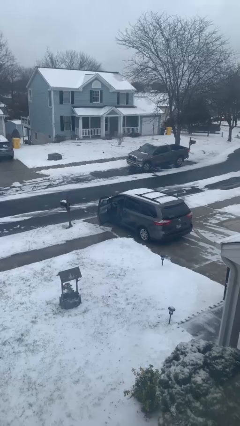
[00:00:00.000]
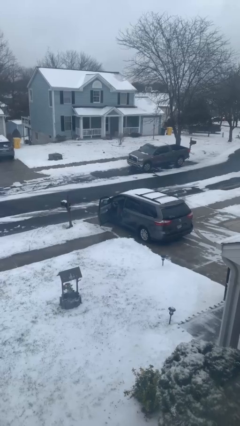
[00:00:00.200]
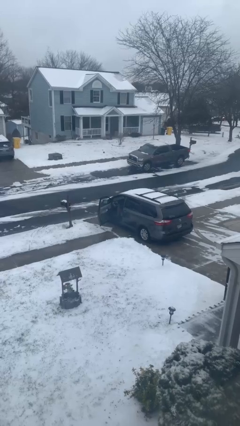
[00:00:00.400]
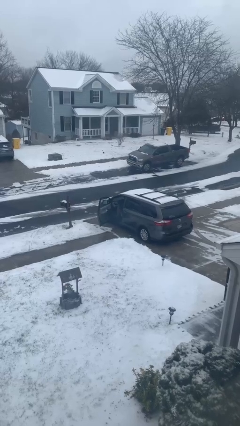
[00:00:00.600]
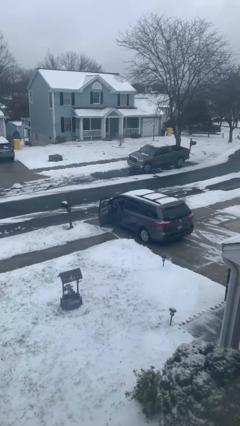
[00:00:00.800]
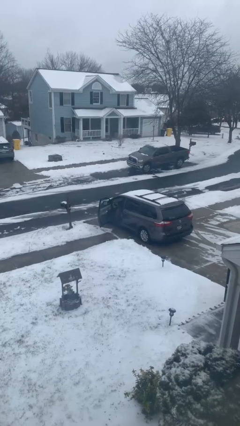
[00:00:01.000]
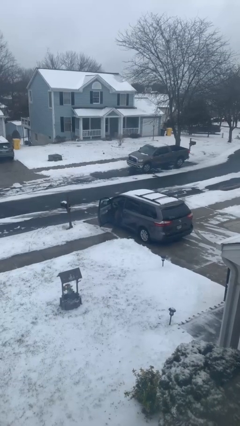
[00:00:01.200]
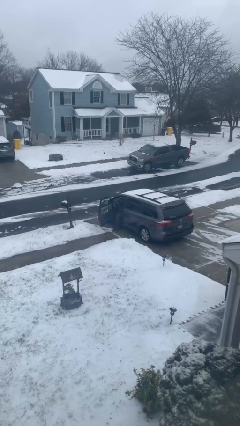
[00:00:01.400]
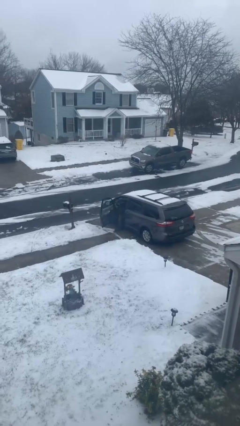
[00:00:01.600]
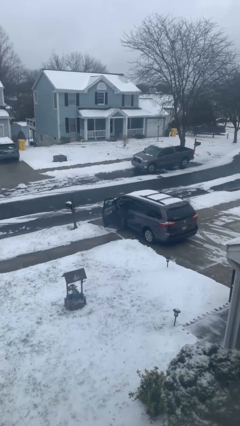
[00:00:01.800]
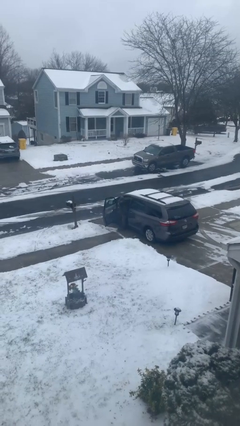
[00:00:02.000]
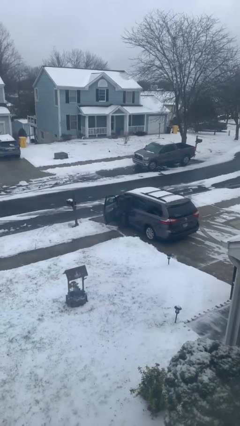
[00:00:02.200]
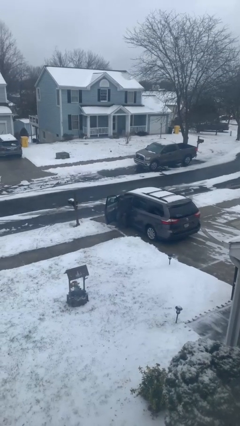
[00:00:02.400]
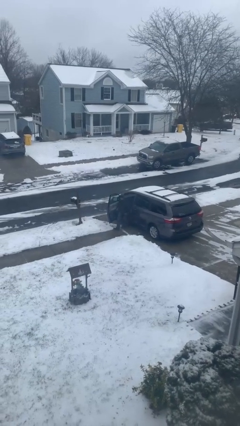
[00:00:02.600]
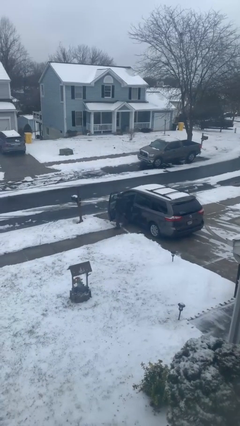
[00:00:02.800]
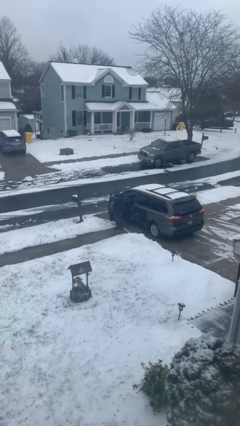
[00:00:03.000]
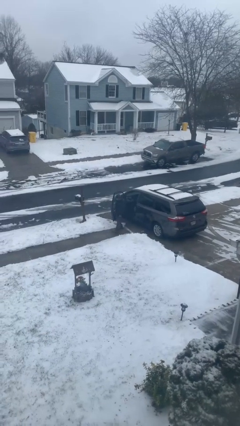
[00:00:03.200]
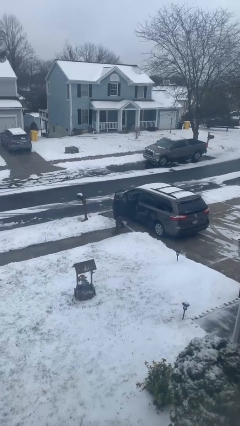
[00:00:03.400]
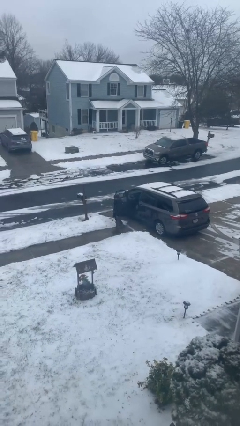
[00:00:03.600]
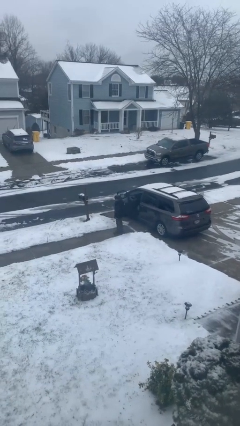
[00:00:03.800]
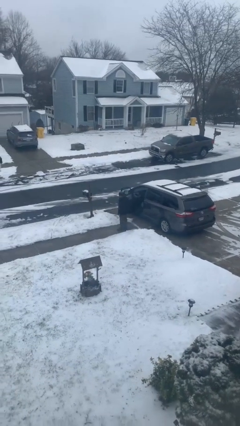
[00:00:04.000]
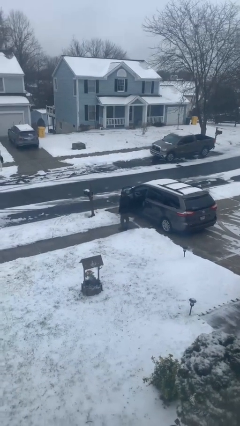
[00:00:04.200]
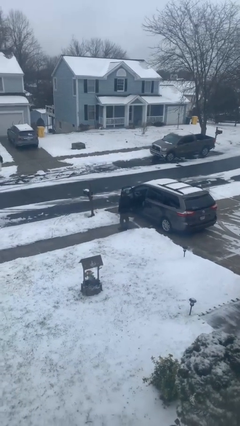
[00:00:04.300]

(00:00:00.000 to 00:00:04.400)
person exits car

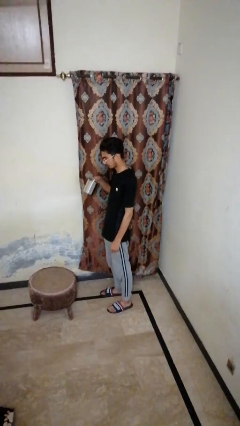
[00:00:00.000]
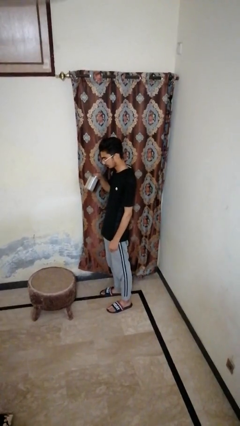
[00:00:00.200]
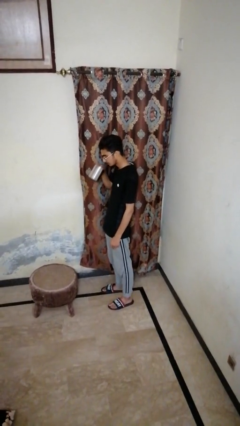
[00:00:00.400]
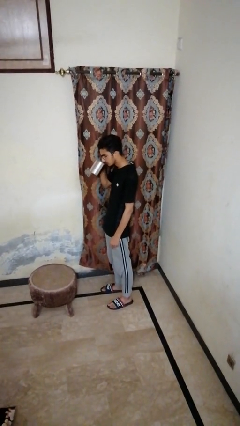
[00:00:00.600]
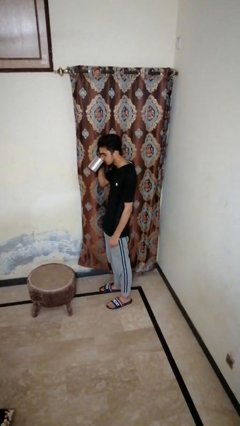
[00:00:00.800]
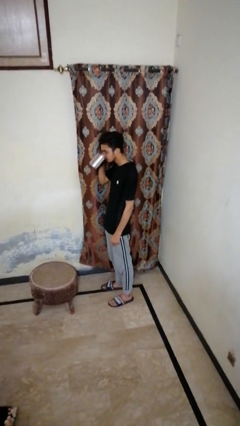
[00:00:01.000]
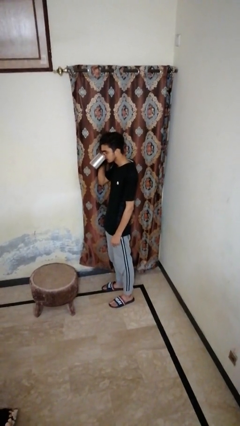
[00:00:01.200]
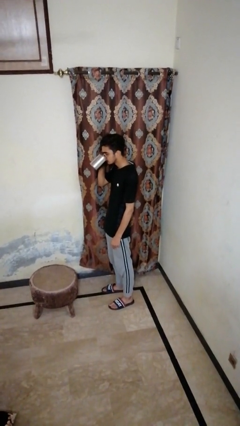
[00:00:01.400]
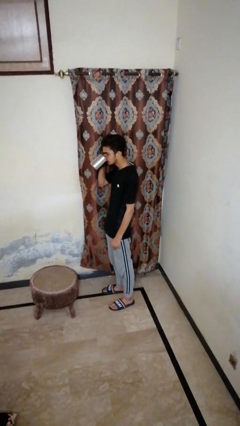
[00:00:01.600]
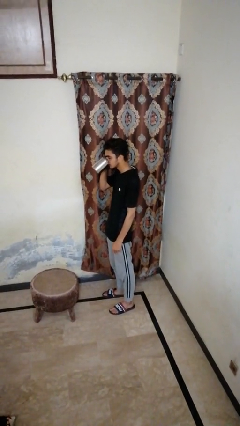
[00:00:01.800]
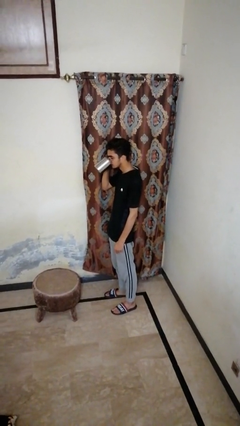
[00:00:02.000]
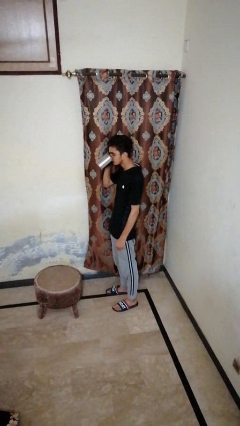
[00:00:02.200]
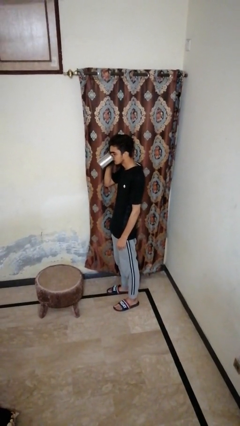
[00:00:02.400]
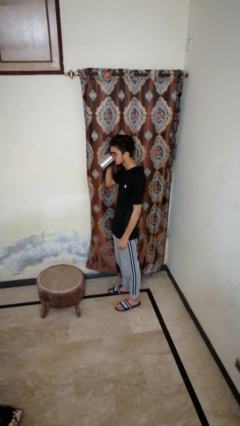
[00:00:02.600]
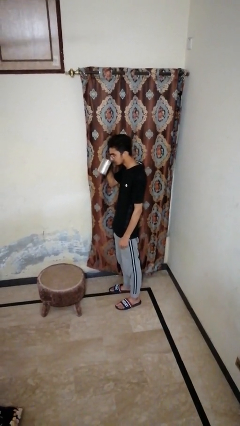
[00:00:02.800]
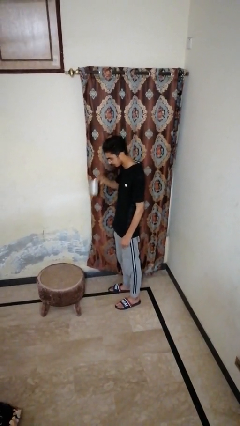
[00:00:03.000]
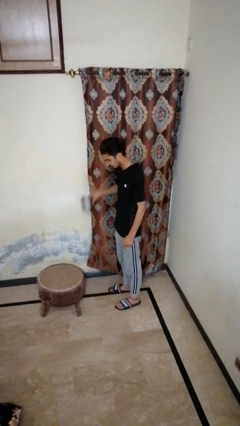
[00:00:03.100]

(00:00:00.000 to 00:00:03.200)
person drinks from mug

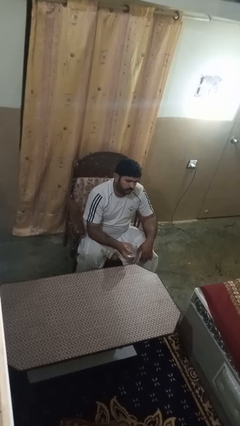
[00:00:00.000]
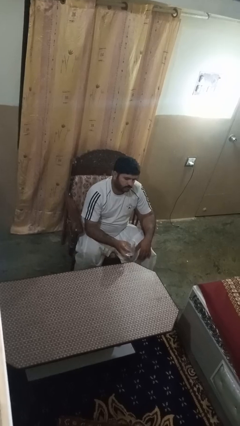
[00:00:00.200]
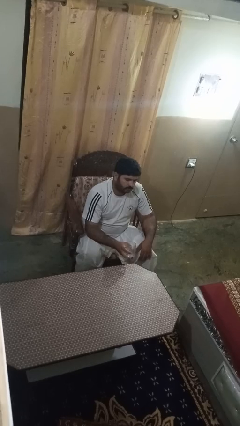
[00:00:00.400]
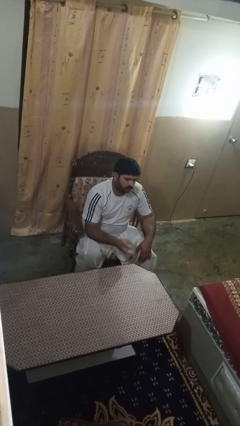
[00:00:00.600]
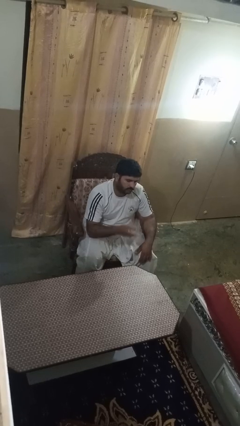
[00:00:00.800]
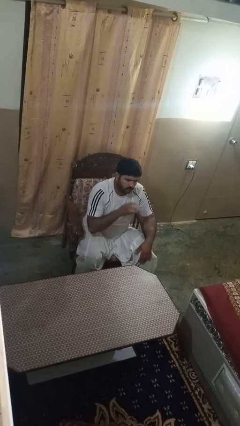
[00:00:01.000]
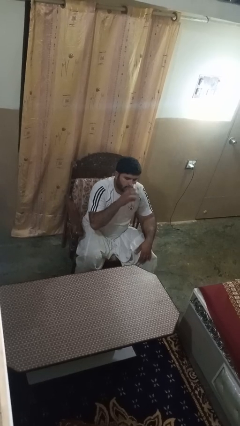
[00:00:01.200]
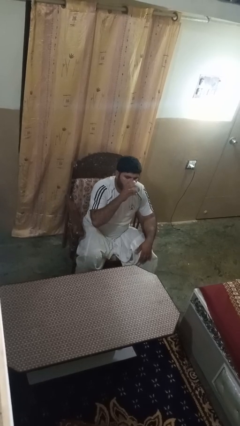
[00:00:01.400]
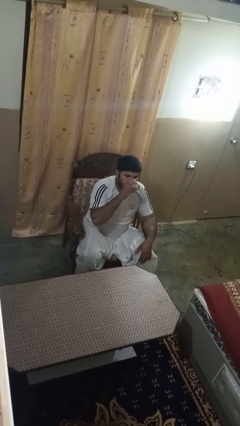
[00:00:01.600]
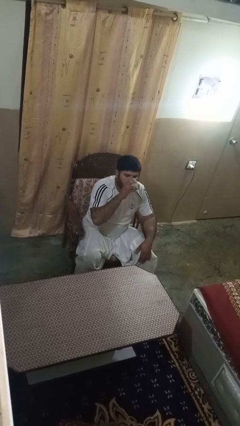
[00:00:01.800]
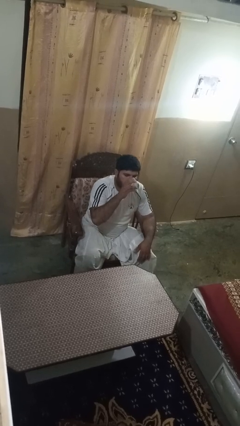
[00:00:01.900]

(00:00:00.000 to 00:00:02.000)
person drinks from shotglass

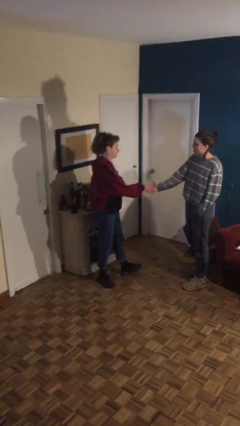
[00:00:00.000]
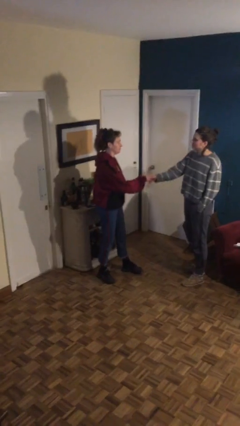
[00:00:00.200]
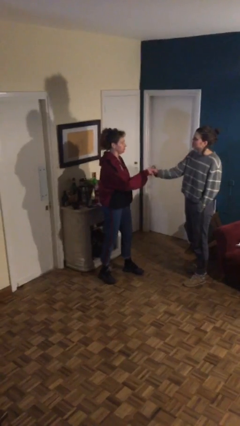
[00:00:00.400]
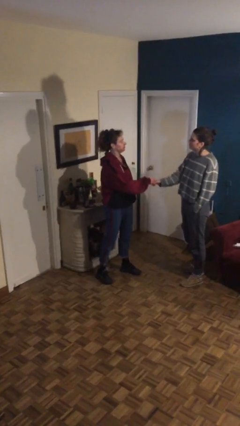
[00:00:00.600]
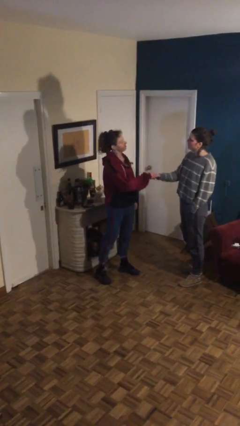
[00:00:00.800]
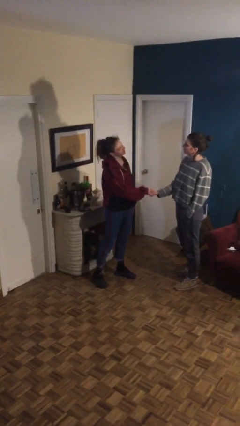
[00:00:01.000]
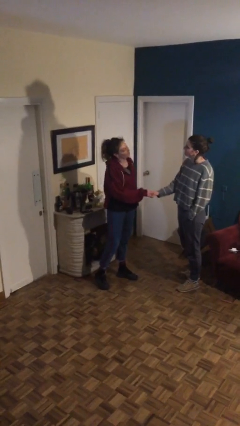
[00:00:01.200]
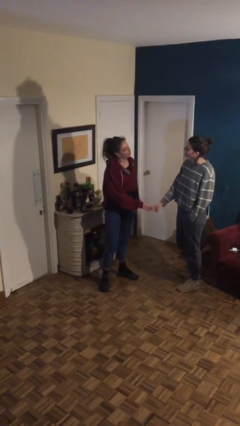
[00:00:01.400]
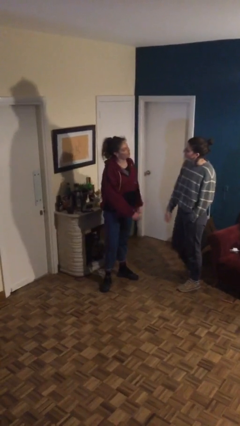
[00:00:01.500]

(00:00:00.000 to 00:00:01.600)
person shakes hand

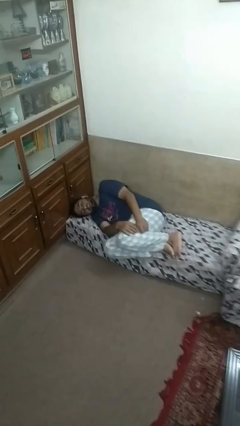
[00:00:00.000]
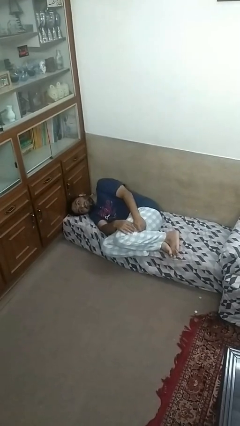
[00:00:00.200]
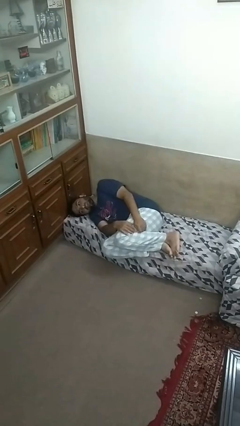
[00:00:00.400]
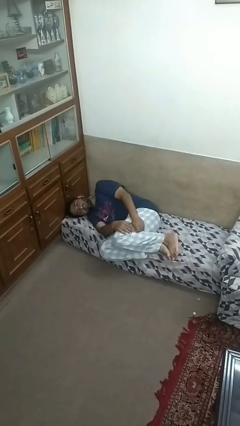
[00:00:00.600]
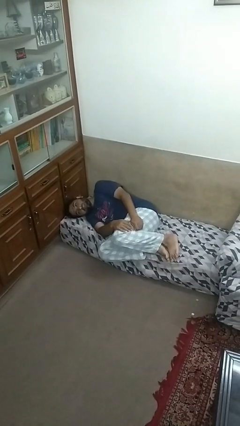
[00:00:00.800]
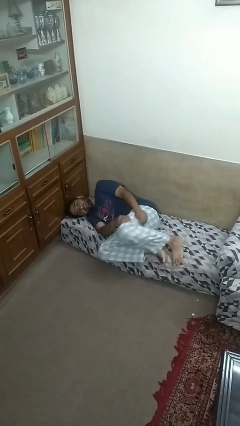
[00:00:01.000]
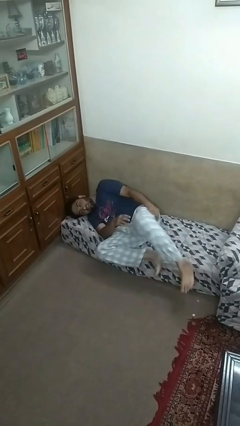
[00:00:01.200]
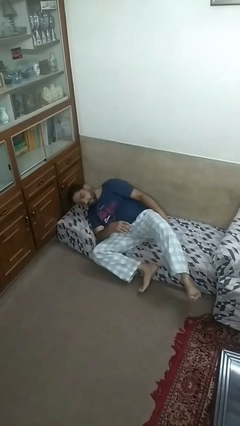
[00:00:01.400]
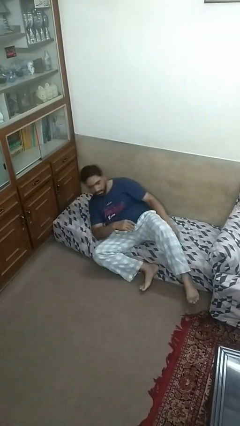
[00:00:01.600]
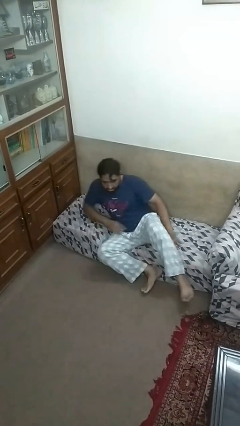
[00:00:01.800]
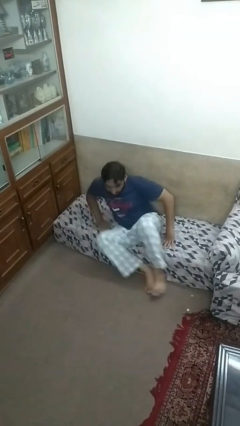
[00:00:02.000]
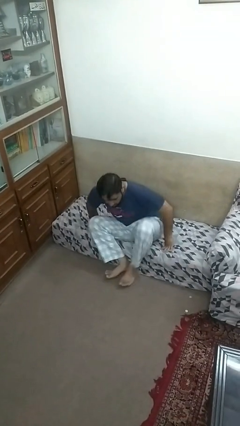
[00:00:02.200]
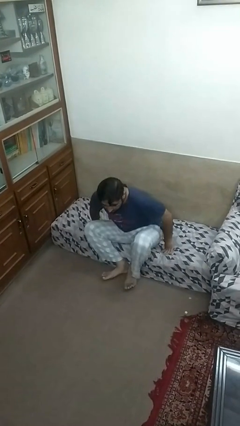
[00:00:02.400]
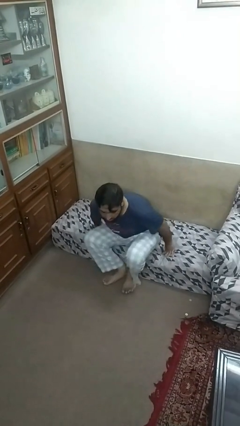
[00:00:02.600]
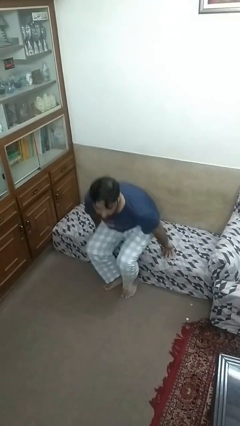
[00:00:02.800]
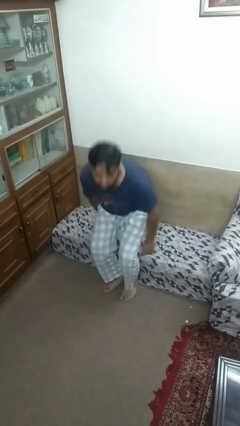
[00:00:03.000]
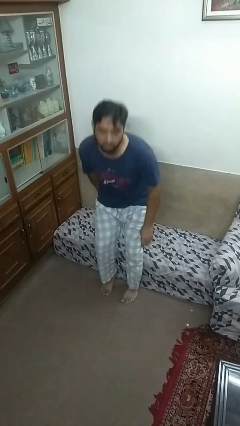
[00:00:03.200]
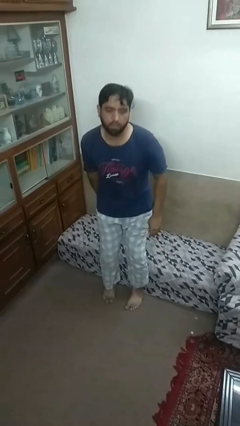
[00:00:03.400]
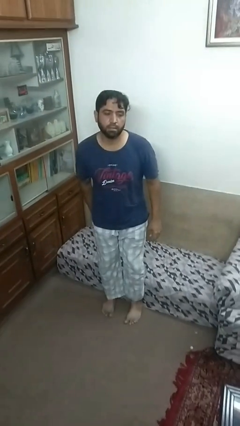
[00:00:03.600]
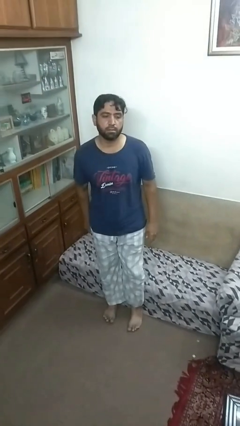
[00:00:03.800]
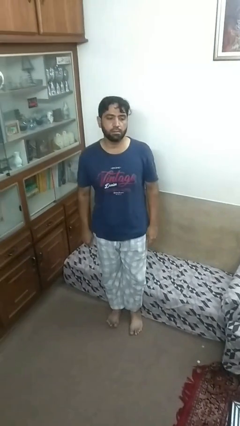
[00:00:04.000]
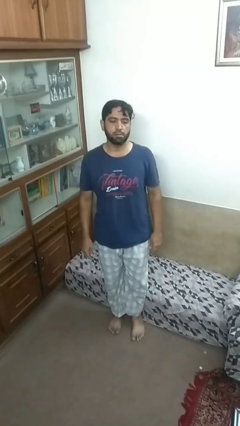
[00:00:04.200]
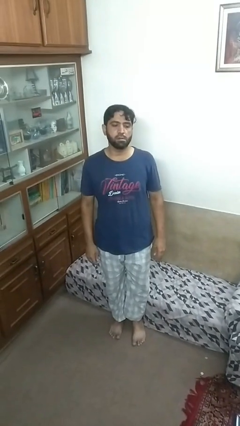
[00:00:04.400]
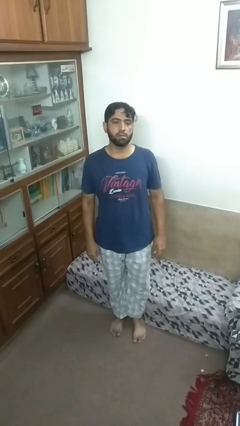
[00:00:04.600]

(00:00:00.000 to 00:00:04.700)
person stands up

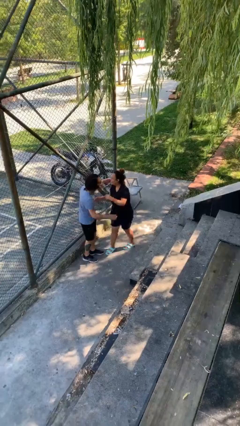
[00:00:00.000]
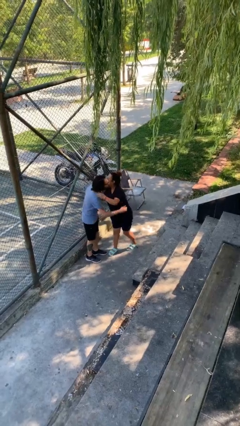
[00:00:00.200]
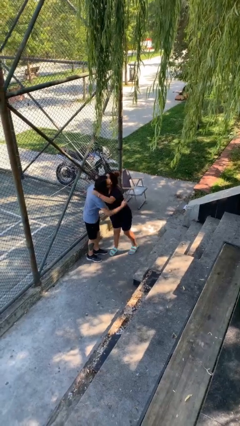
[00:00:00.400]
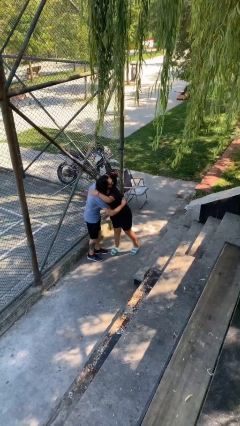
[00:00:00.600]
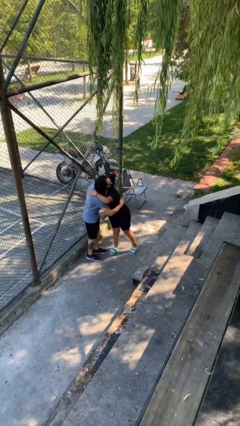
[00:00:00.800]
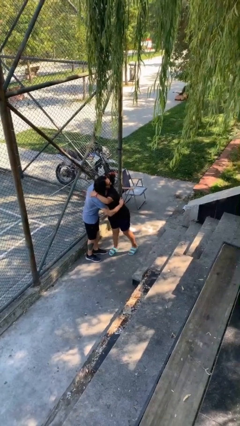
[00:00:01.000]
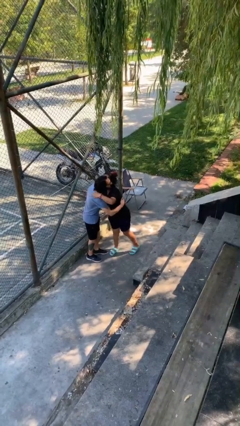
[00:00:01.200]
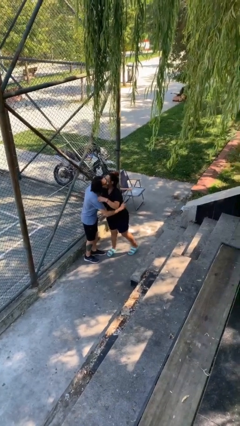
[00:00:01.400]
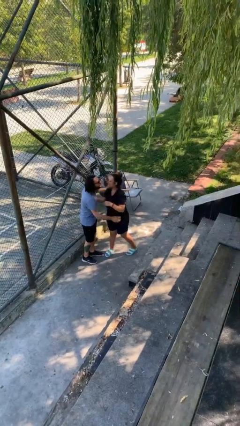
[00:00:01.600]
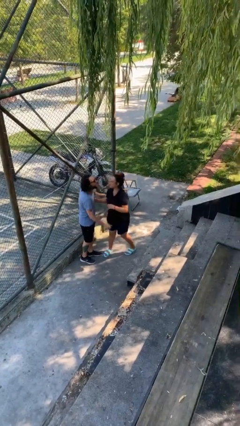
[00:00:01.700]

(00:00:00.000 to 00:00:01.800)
person embraces person
